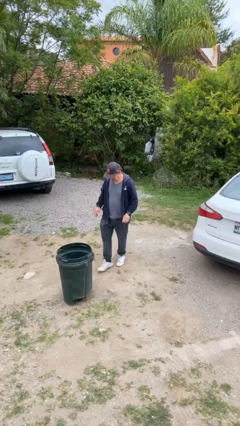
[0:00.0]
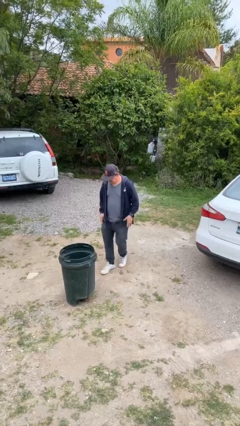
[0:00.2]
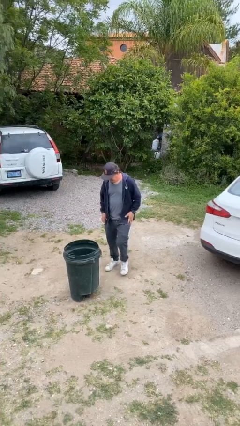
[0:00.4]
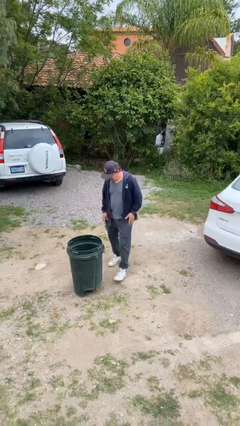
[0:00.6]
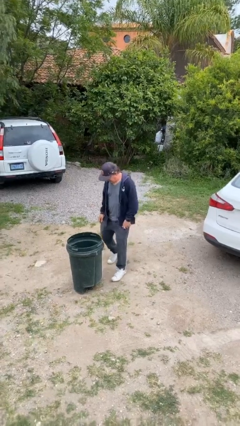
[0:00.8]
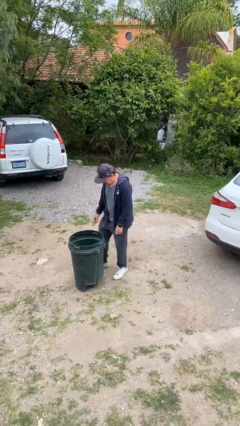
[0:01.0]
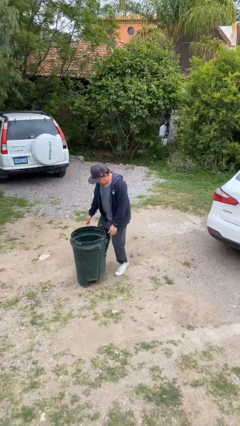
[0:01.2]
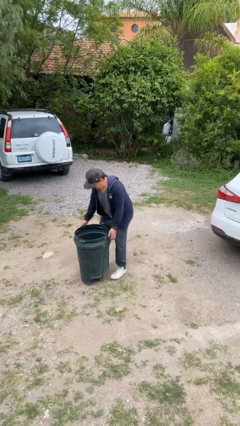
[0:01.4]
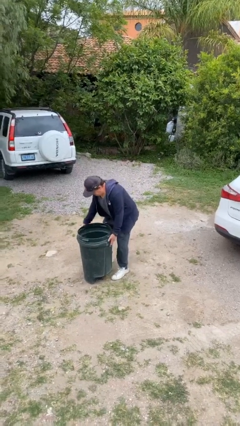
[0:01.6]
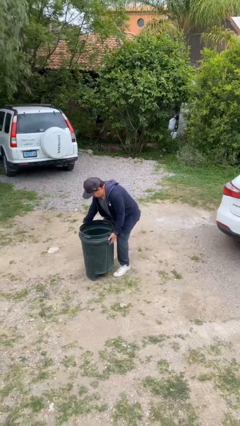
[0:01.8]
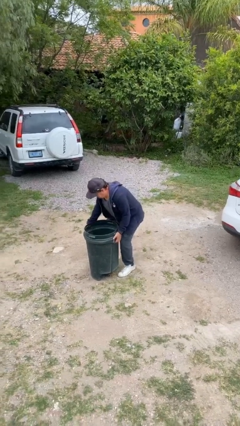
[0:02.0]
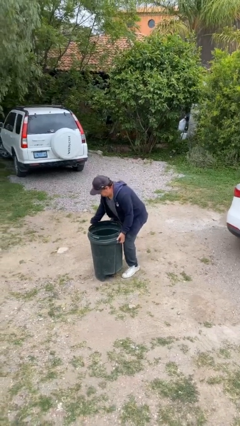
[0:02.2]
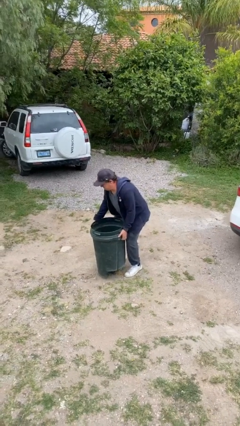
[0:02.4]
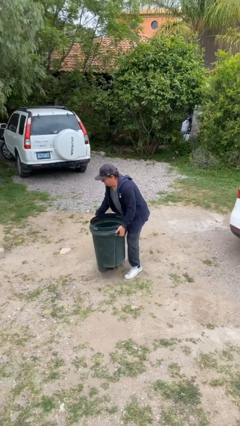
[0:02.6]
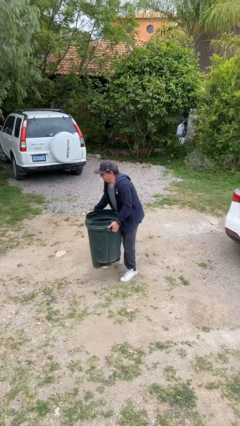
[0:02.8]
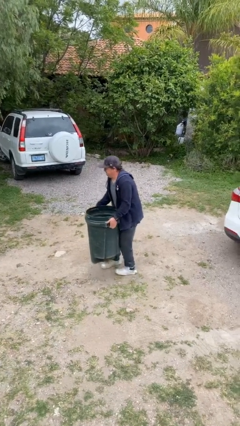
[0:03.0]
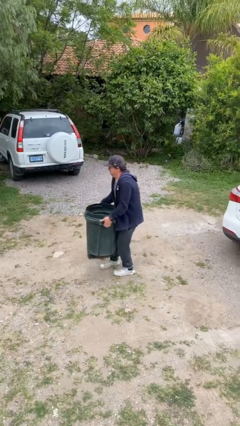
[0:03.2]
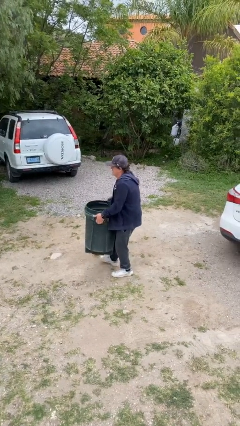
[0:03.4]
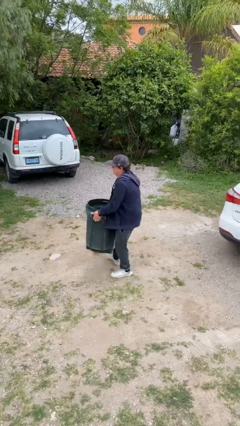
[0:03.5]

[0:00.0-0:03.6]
person picks up object from floor

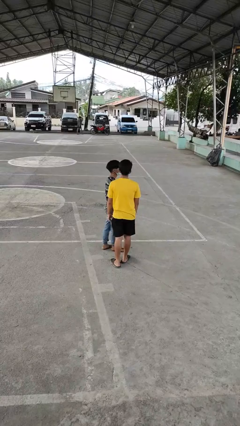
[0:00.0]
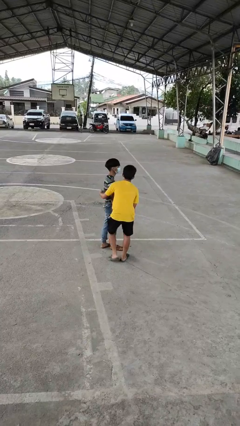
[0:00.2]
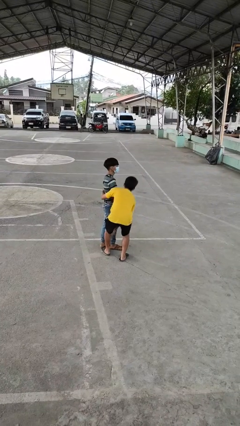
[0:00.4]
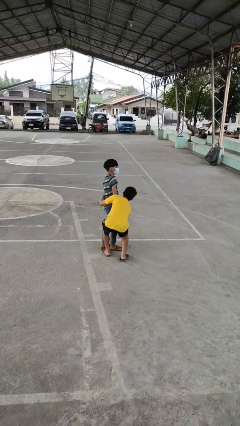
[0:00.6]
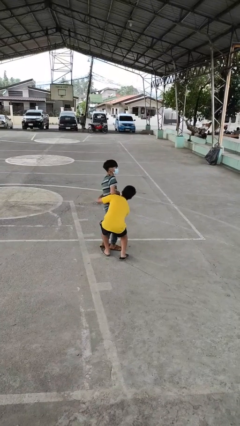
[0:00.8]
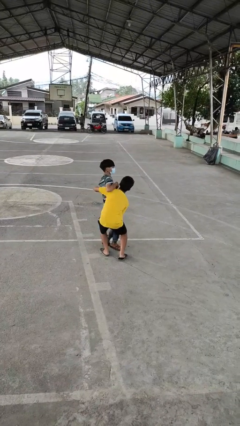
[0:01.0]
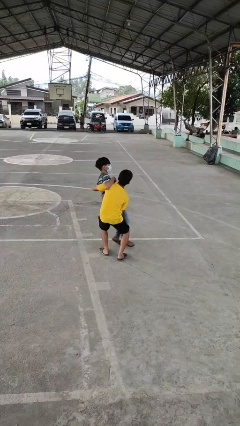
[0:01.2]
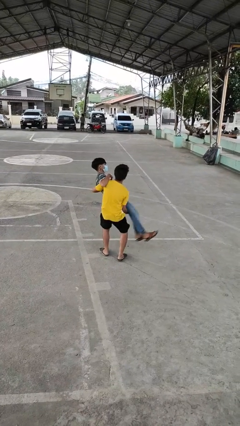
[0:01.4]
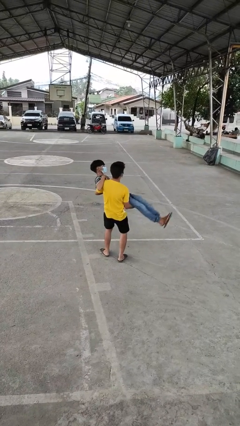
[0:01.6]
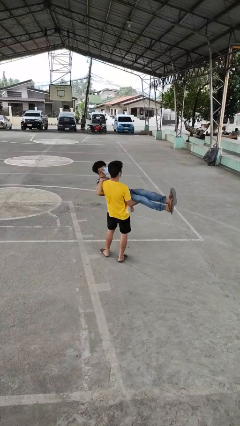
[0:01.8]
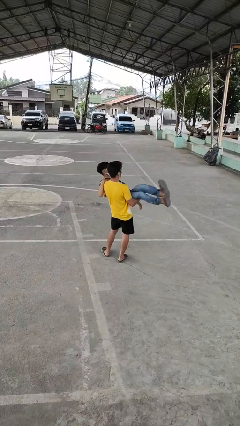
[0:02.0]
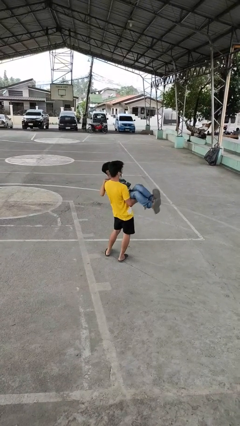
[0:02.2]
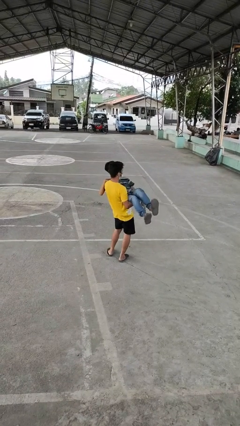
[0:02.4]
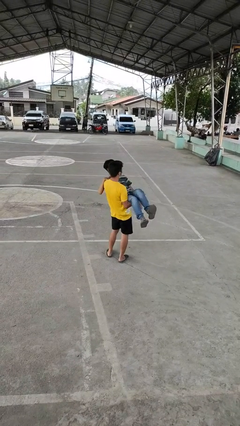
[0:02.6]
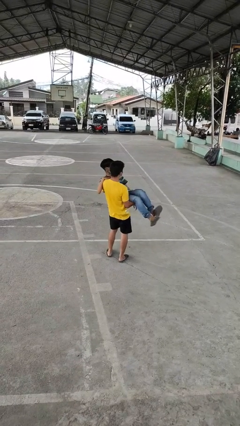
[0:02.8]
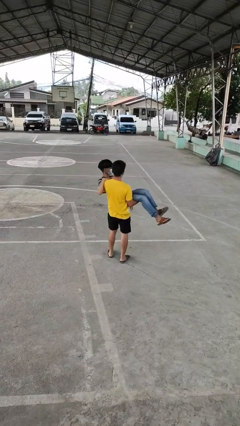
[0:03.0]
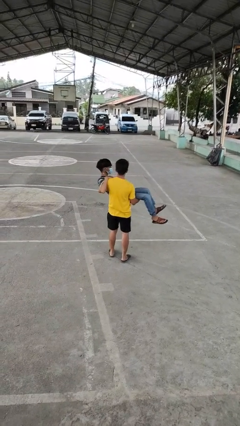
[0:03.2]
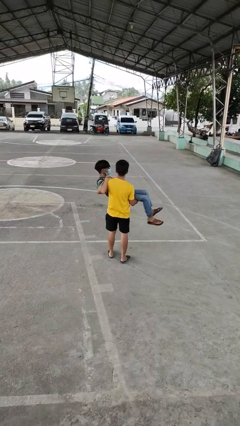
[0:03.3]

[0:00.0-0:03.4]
person picks up person

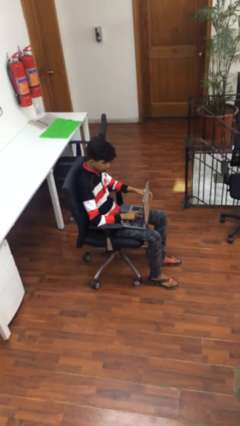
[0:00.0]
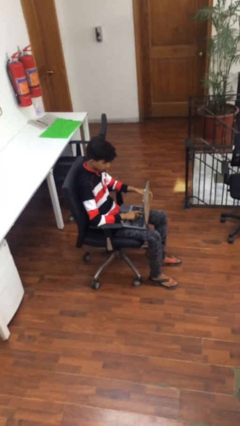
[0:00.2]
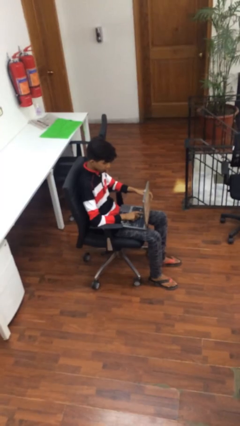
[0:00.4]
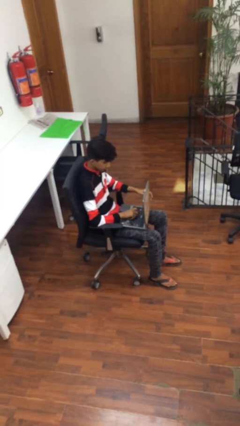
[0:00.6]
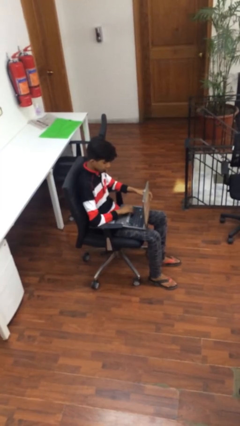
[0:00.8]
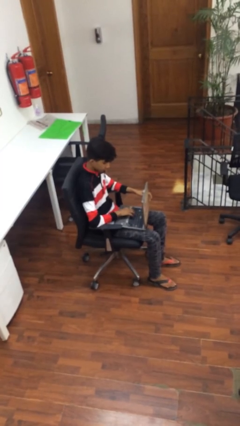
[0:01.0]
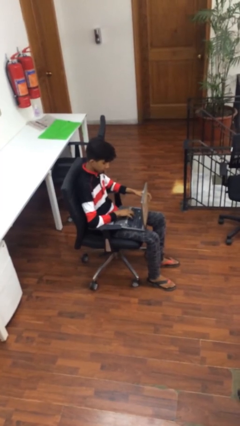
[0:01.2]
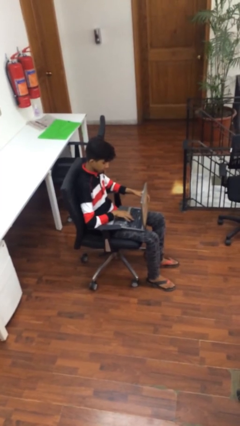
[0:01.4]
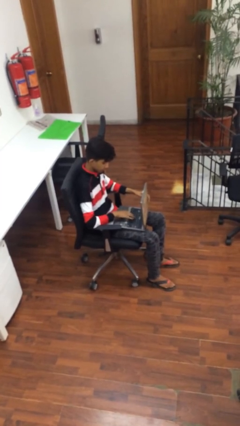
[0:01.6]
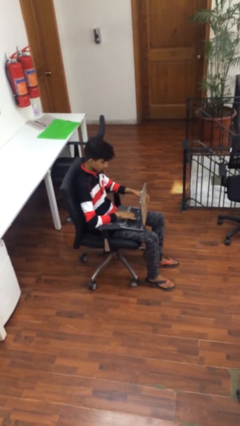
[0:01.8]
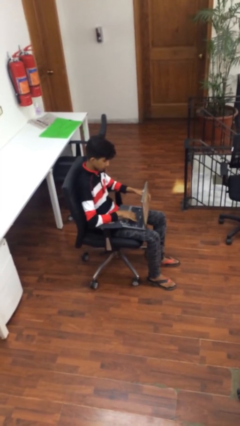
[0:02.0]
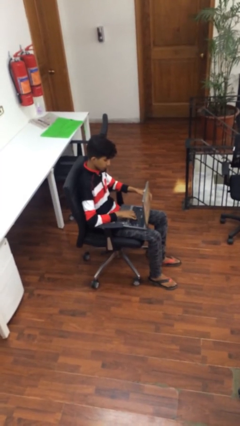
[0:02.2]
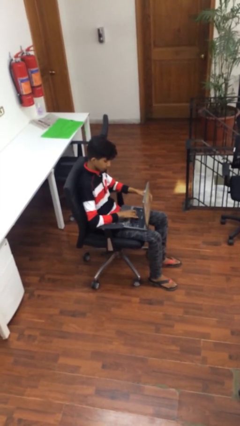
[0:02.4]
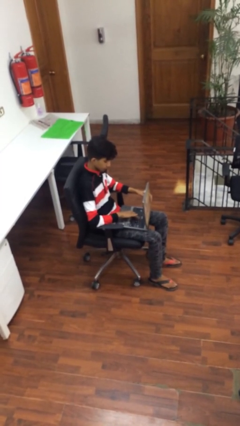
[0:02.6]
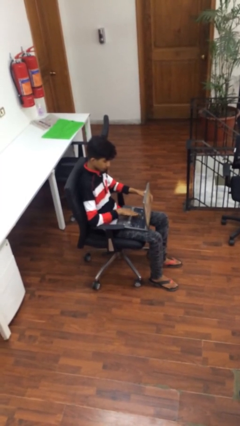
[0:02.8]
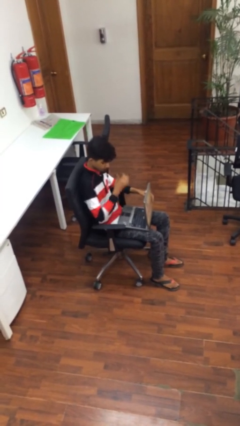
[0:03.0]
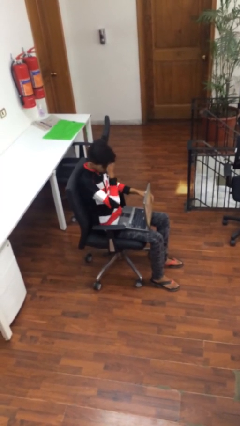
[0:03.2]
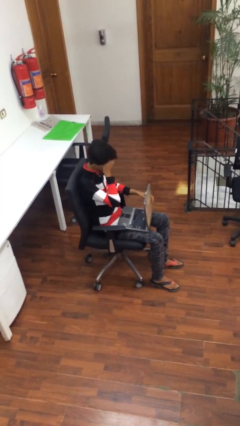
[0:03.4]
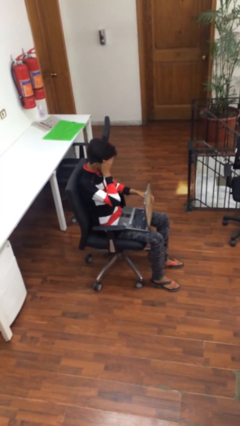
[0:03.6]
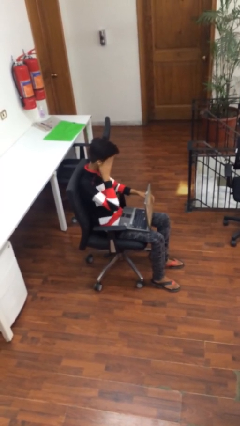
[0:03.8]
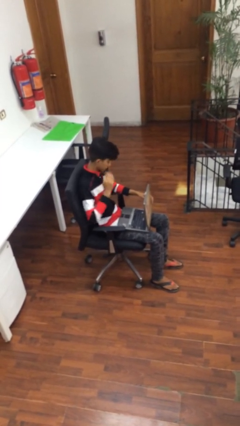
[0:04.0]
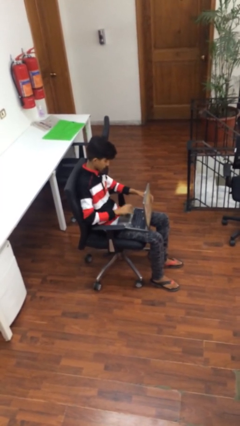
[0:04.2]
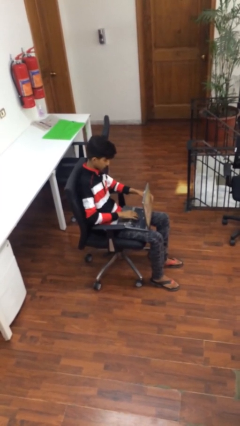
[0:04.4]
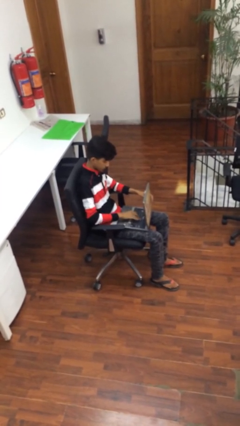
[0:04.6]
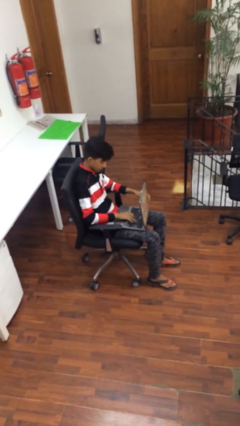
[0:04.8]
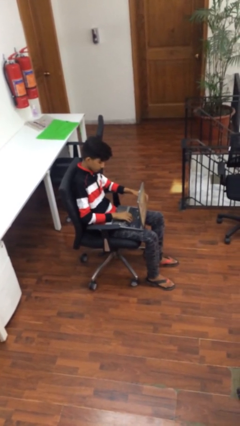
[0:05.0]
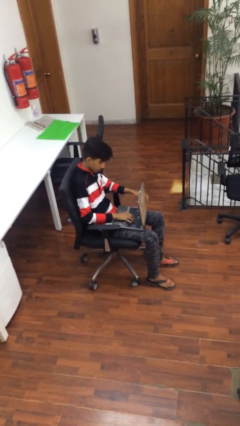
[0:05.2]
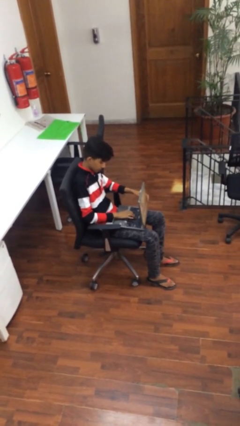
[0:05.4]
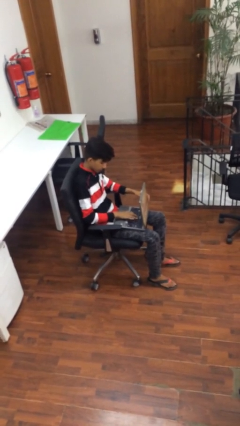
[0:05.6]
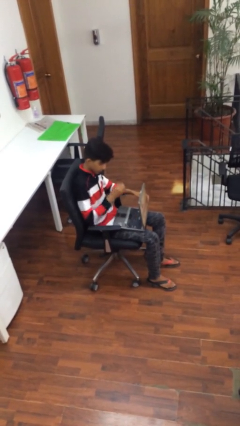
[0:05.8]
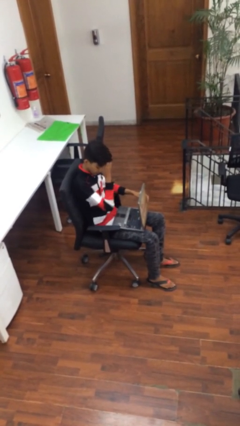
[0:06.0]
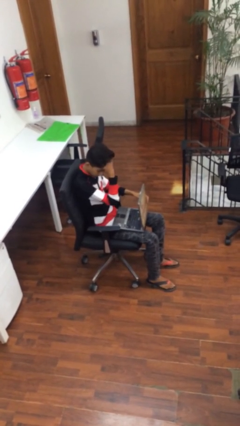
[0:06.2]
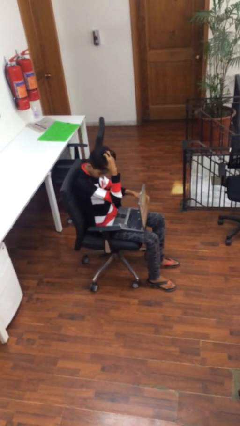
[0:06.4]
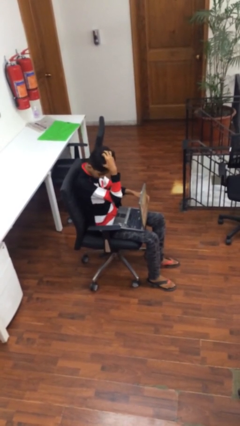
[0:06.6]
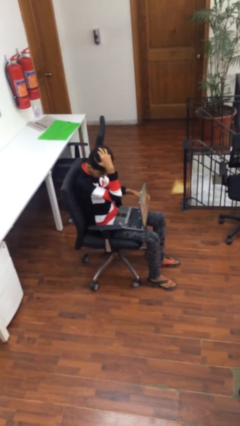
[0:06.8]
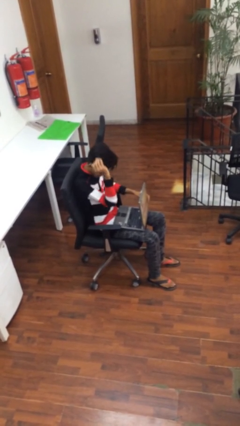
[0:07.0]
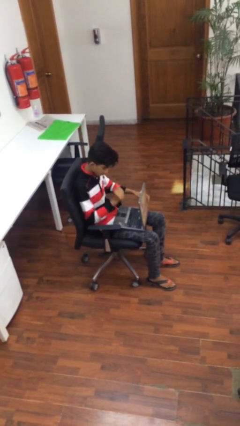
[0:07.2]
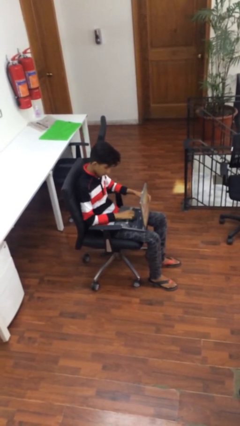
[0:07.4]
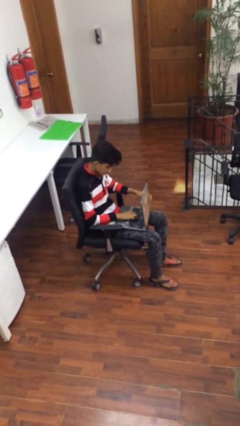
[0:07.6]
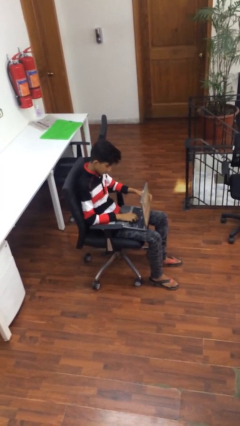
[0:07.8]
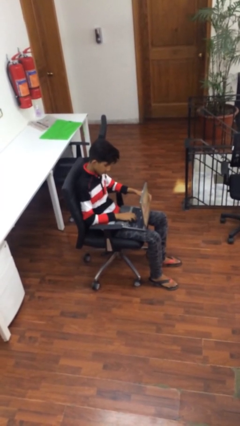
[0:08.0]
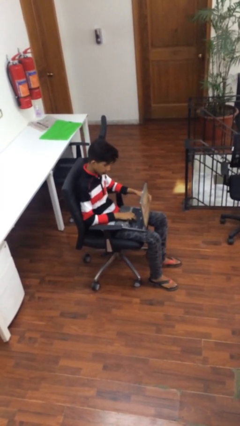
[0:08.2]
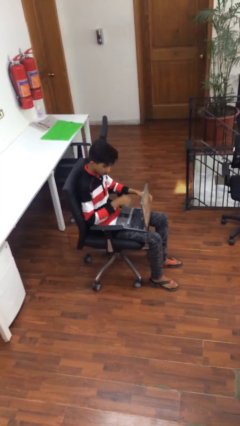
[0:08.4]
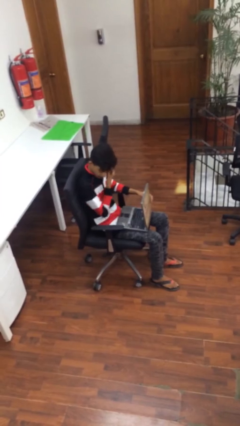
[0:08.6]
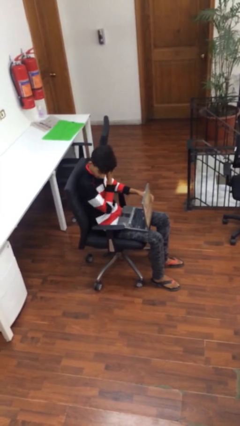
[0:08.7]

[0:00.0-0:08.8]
person interacts with laptop

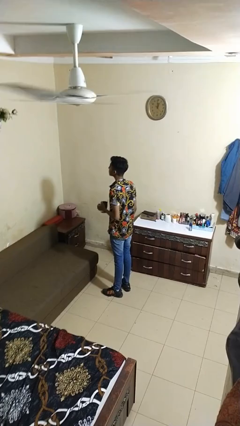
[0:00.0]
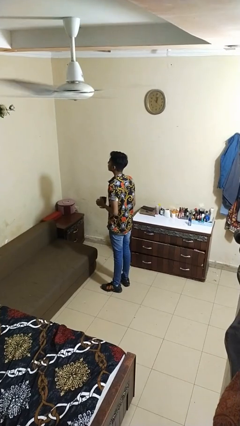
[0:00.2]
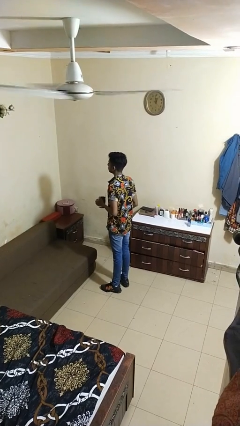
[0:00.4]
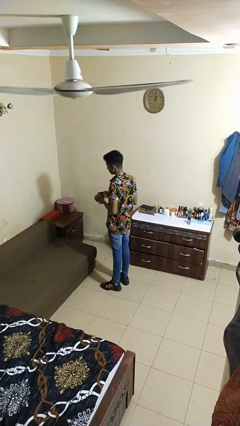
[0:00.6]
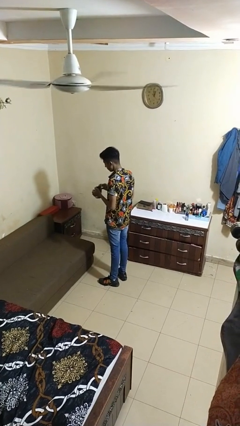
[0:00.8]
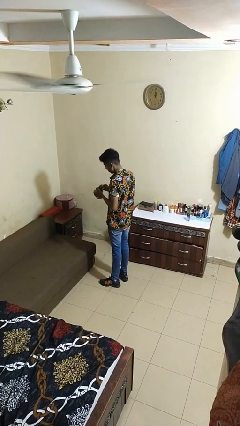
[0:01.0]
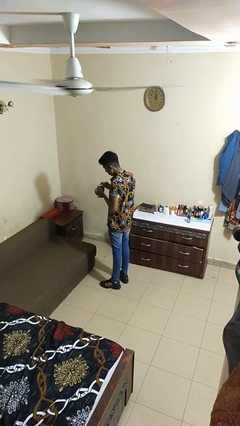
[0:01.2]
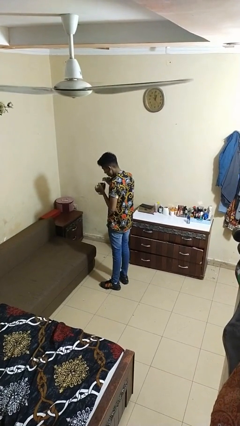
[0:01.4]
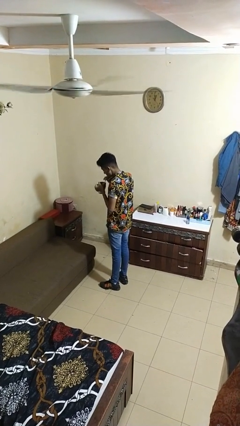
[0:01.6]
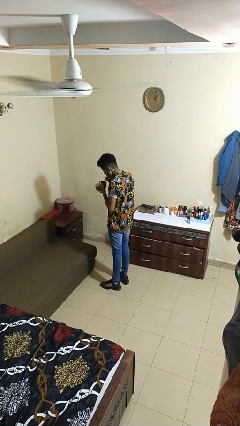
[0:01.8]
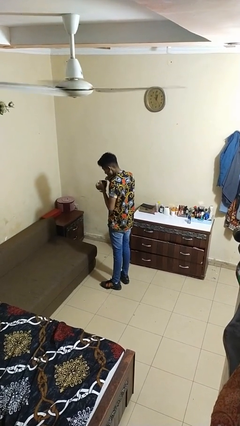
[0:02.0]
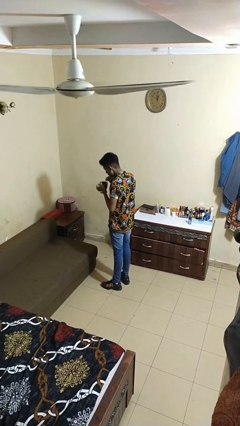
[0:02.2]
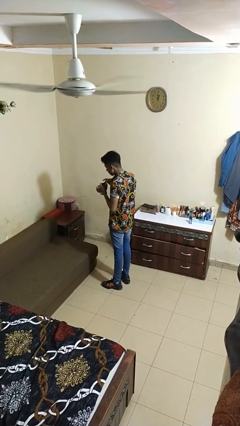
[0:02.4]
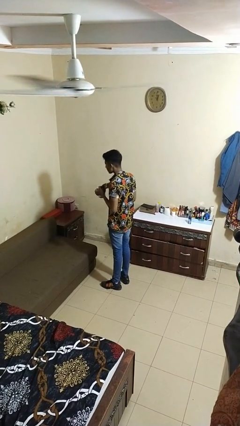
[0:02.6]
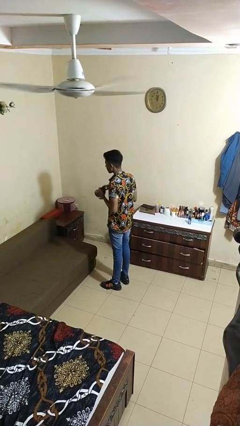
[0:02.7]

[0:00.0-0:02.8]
person drinks from straw
